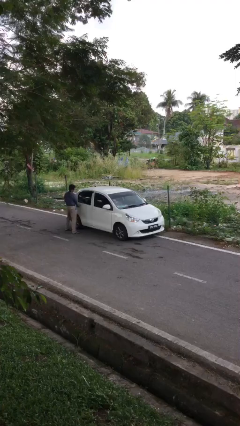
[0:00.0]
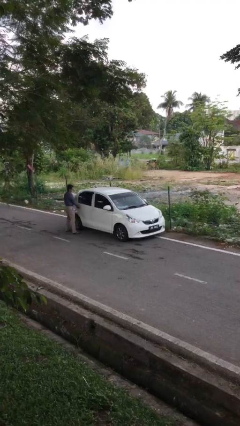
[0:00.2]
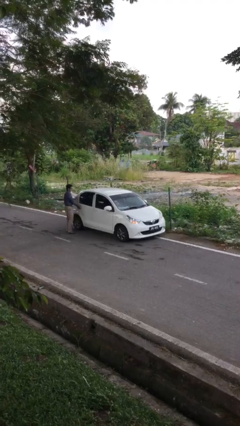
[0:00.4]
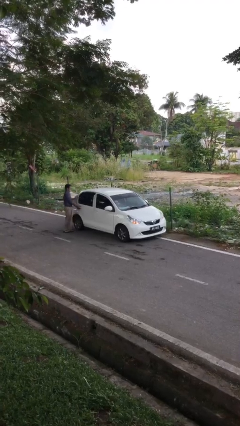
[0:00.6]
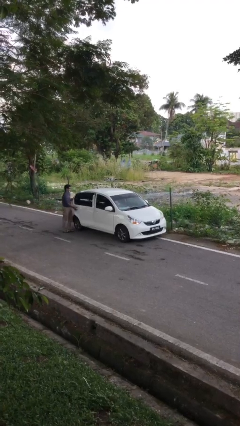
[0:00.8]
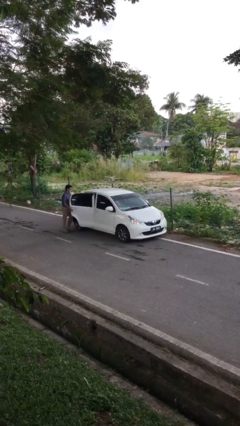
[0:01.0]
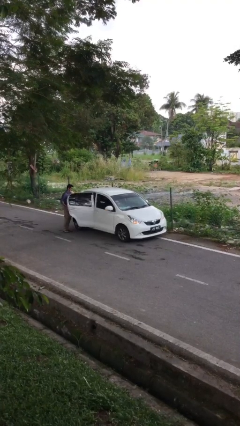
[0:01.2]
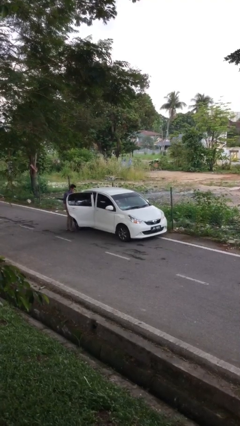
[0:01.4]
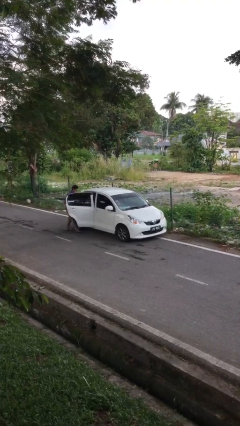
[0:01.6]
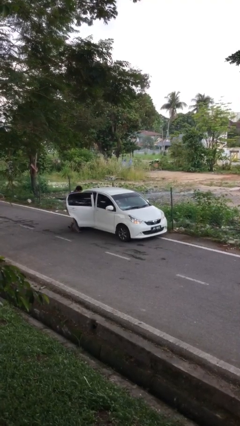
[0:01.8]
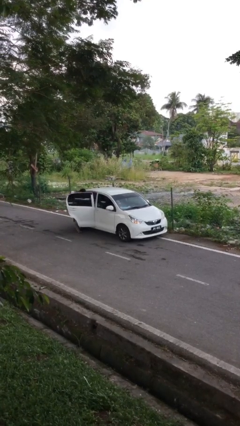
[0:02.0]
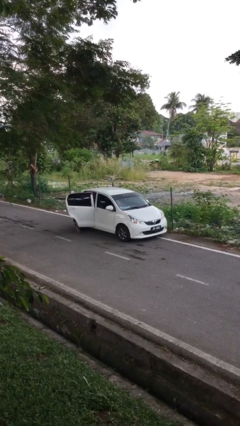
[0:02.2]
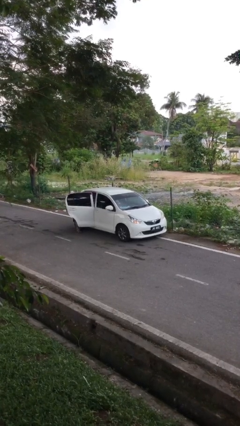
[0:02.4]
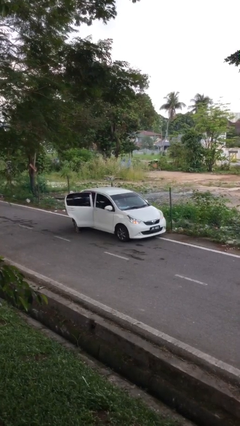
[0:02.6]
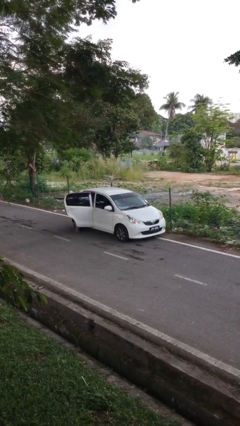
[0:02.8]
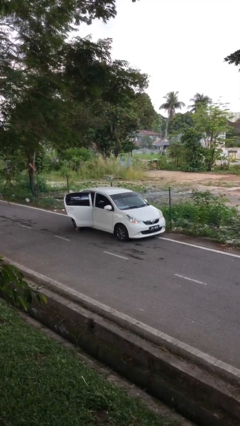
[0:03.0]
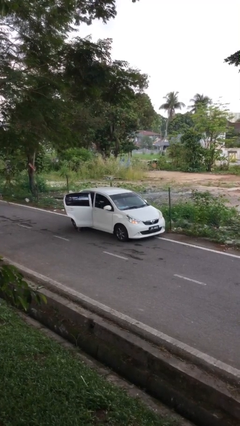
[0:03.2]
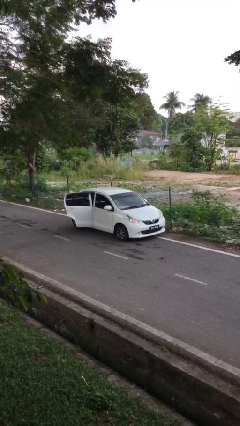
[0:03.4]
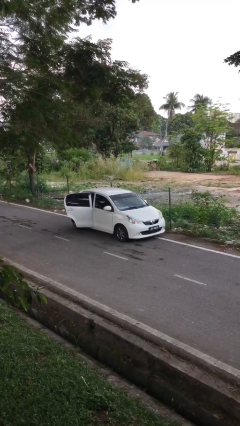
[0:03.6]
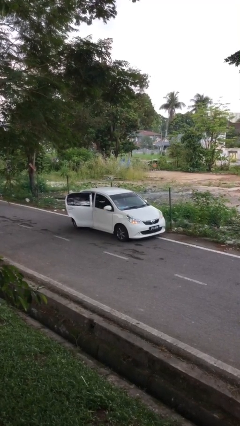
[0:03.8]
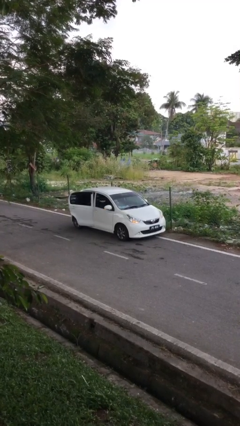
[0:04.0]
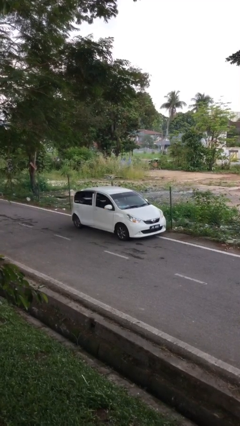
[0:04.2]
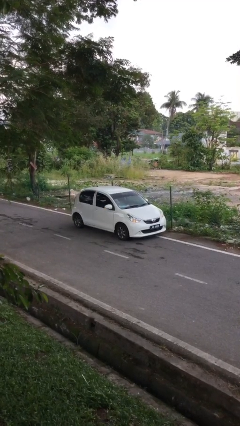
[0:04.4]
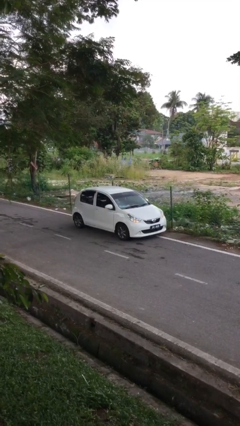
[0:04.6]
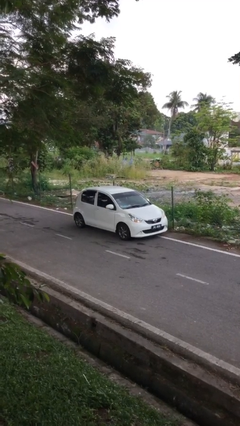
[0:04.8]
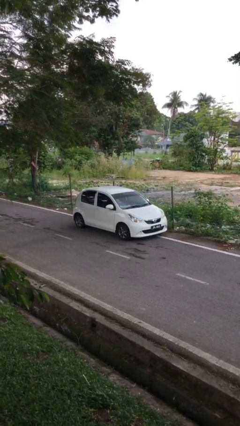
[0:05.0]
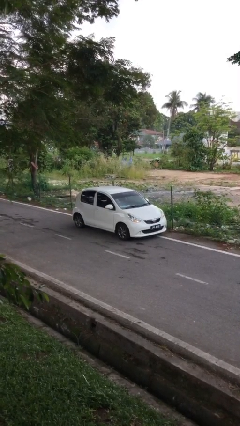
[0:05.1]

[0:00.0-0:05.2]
car picks up person

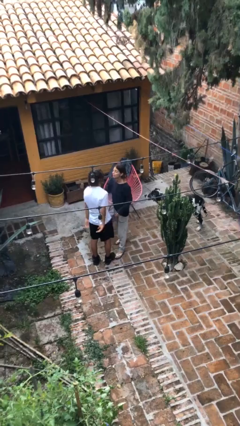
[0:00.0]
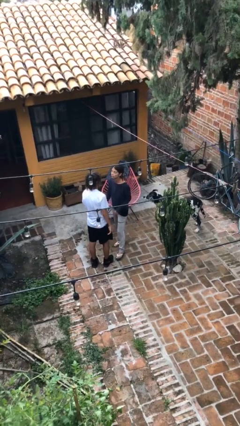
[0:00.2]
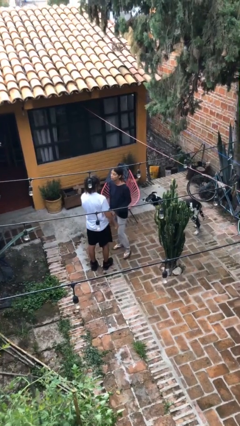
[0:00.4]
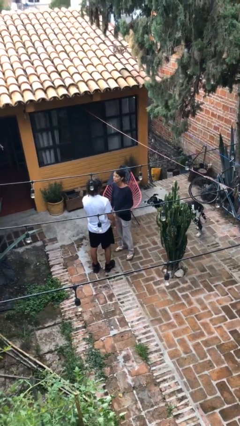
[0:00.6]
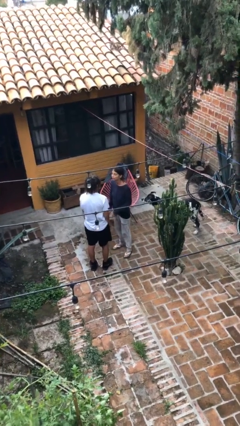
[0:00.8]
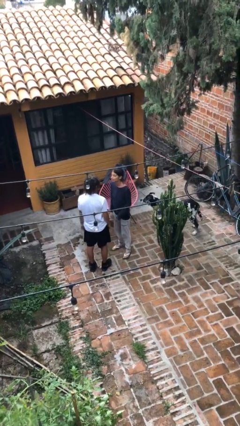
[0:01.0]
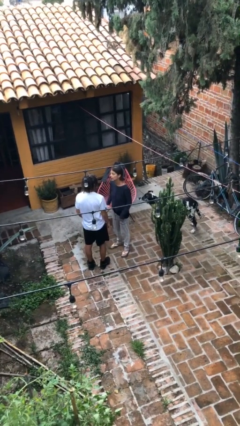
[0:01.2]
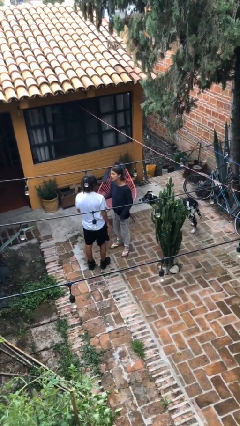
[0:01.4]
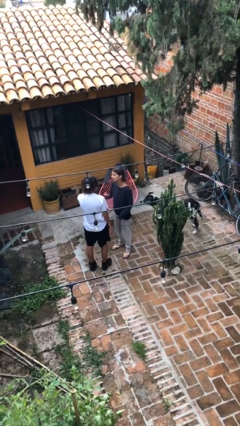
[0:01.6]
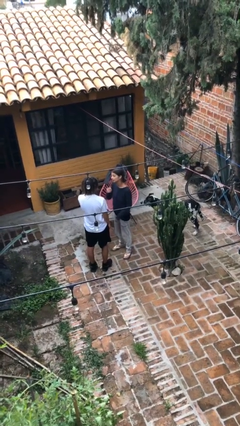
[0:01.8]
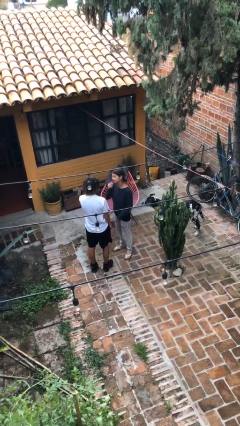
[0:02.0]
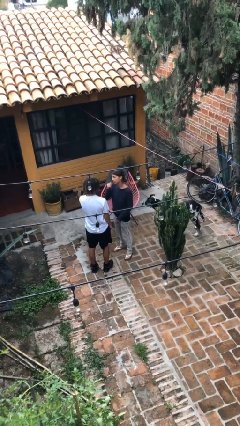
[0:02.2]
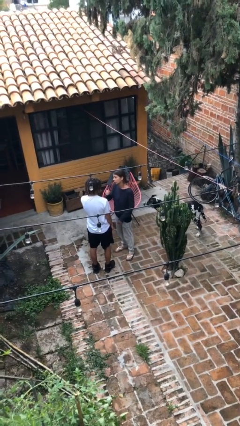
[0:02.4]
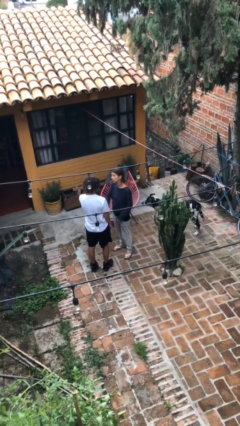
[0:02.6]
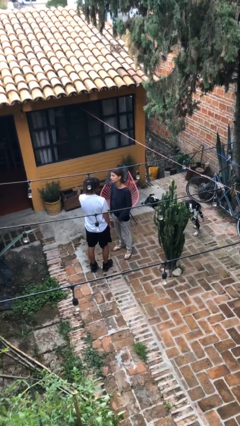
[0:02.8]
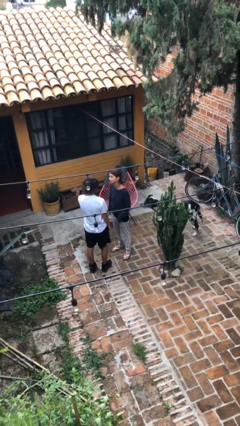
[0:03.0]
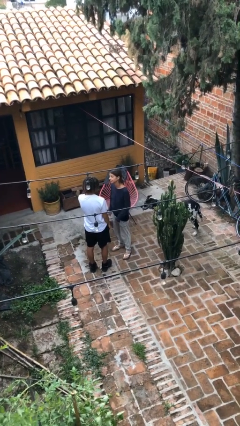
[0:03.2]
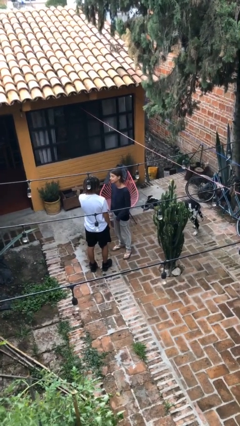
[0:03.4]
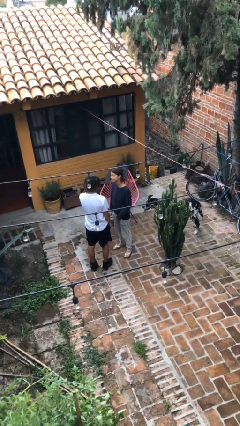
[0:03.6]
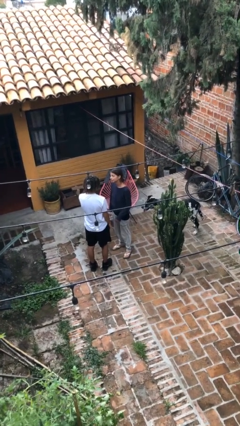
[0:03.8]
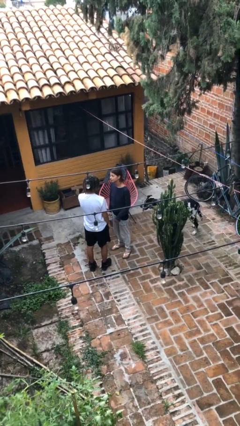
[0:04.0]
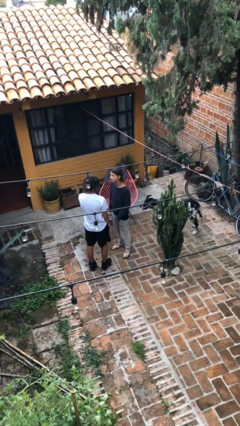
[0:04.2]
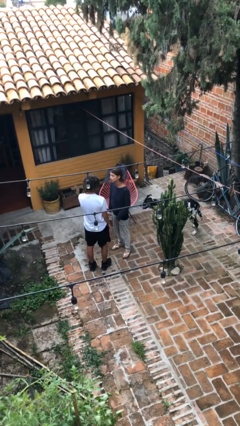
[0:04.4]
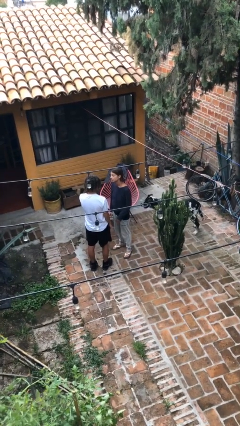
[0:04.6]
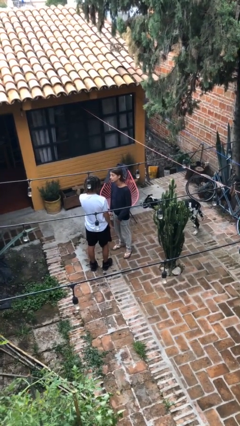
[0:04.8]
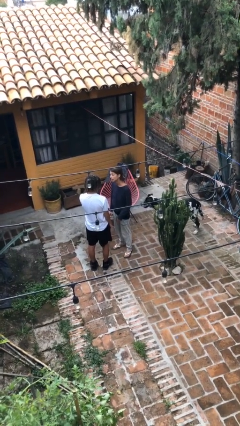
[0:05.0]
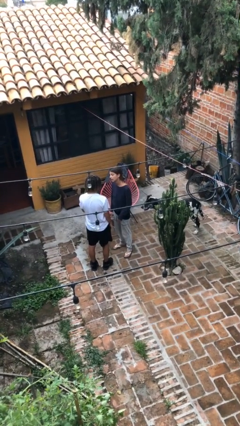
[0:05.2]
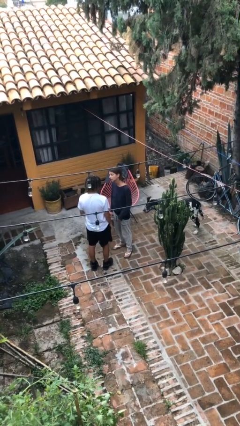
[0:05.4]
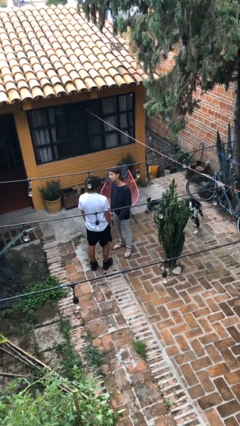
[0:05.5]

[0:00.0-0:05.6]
person talks to person

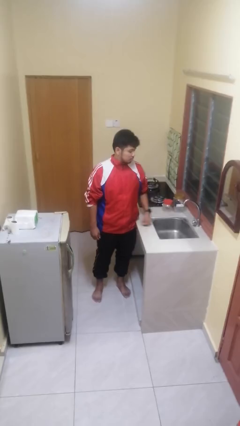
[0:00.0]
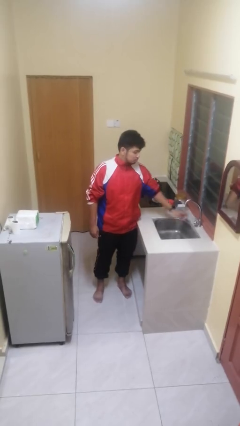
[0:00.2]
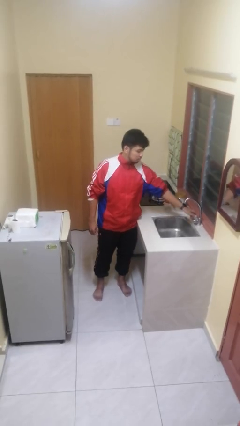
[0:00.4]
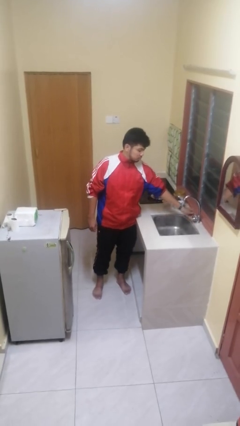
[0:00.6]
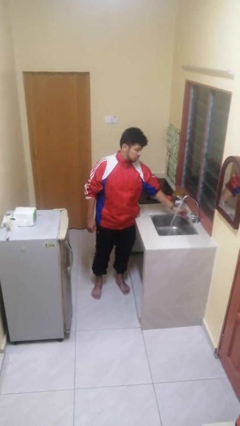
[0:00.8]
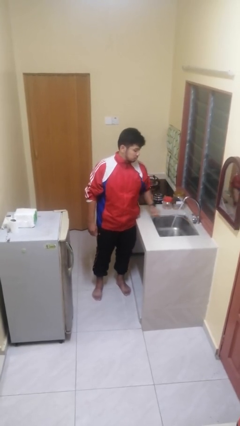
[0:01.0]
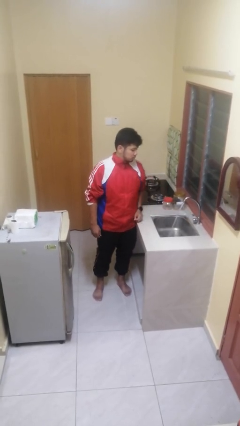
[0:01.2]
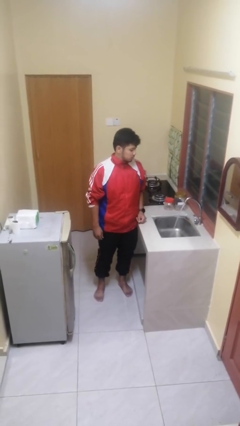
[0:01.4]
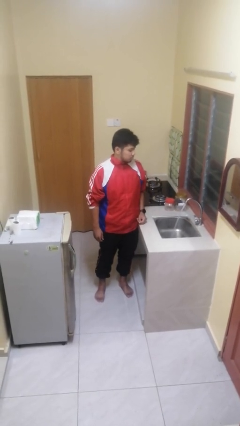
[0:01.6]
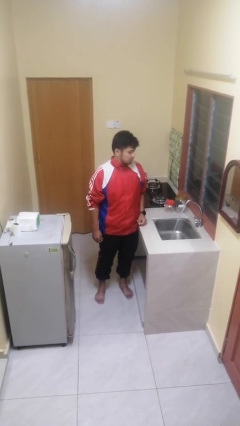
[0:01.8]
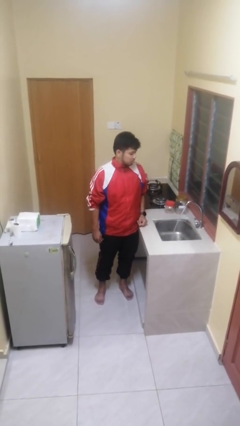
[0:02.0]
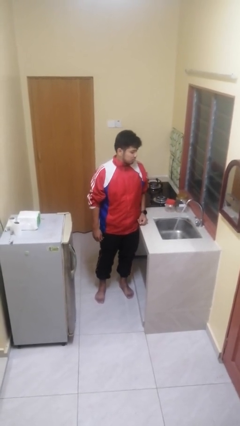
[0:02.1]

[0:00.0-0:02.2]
person turns on faucet

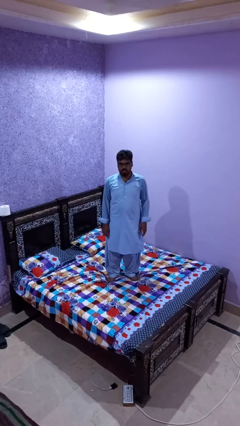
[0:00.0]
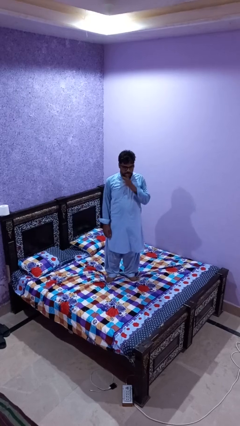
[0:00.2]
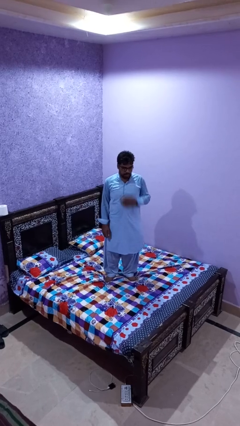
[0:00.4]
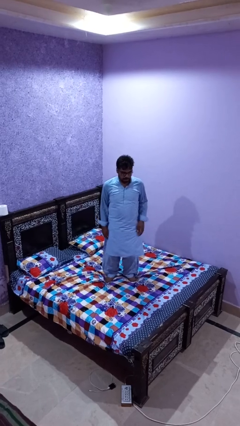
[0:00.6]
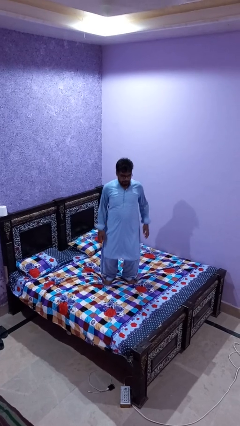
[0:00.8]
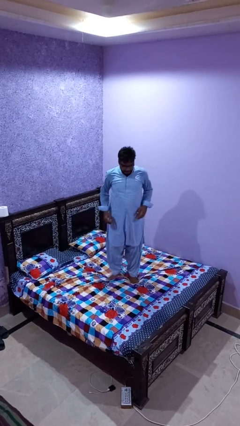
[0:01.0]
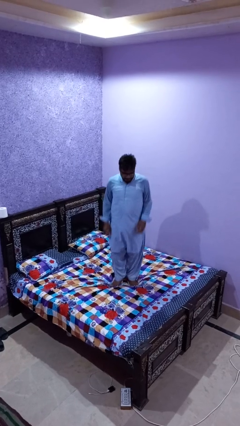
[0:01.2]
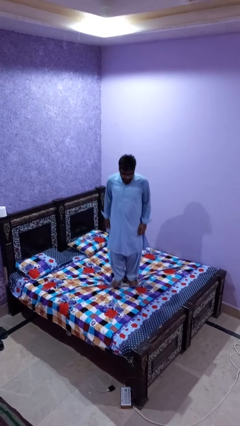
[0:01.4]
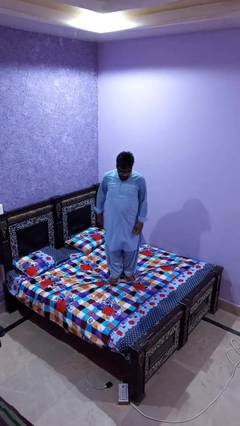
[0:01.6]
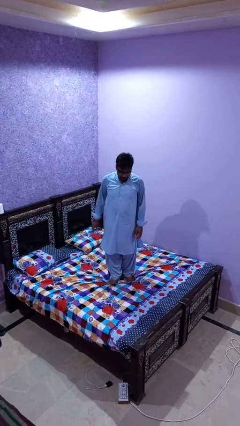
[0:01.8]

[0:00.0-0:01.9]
person jumps on bed

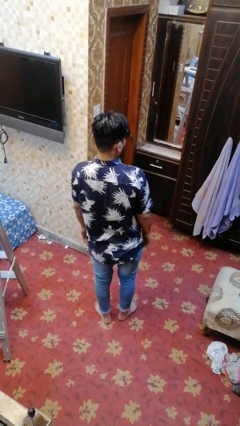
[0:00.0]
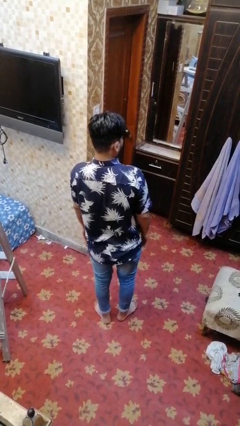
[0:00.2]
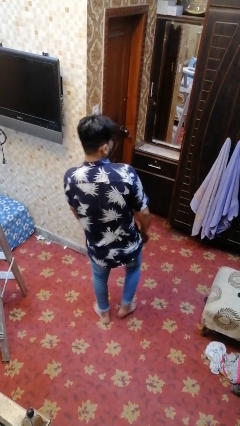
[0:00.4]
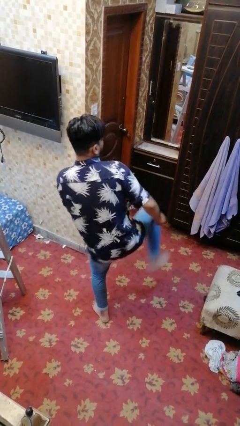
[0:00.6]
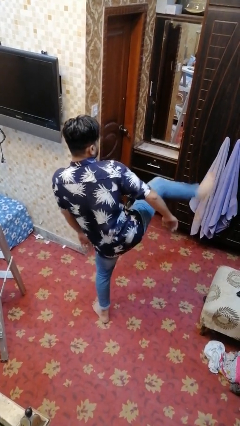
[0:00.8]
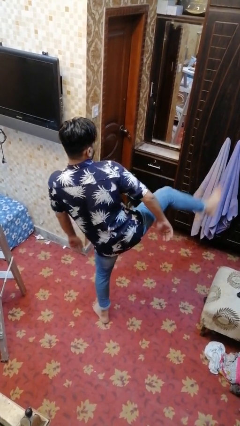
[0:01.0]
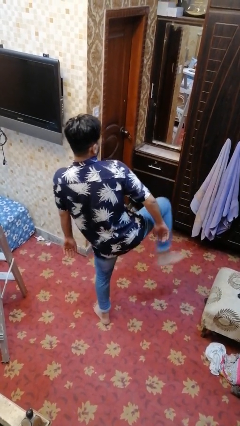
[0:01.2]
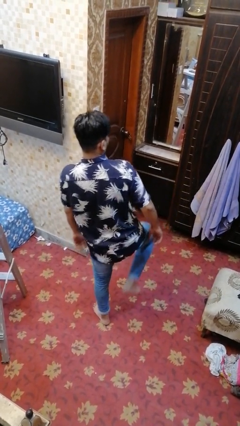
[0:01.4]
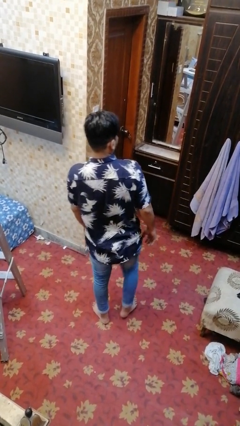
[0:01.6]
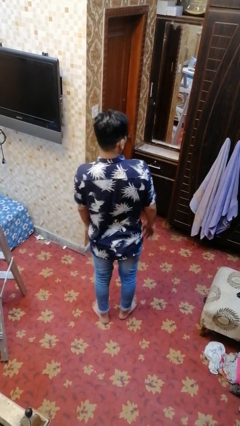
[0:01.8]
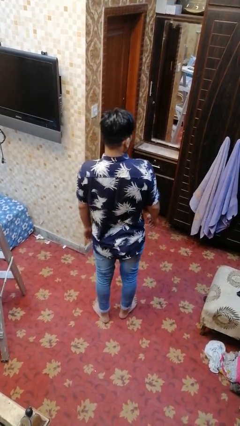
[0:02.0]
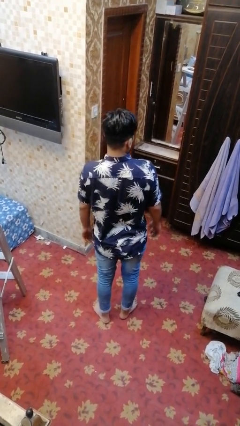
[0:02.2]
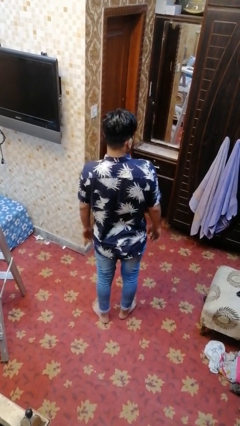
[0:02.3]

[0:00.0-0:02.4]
person karate kicks

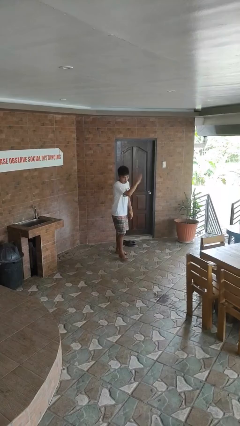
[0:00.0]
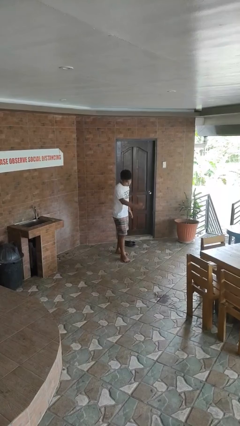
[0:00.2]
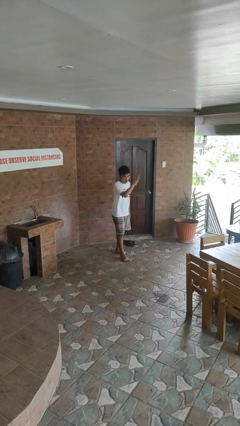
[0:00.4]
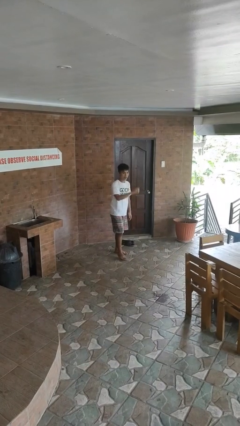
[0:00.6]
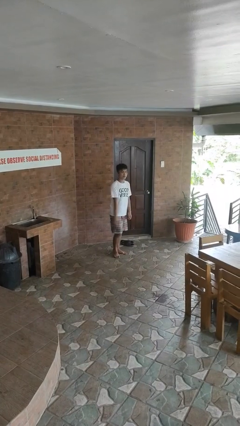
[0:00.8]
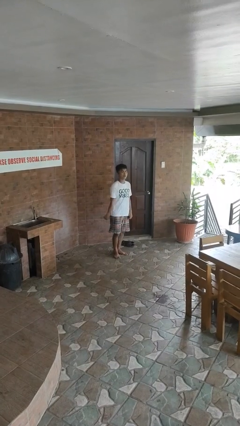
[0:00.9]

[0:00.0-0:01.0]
person karate chop
